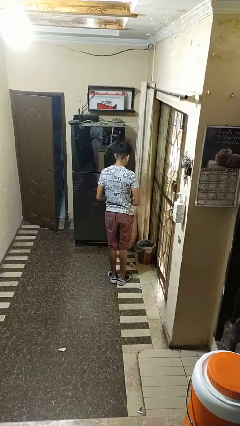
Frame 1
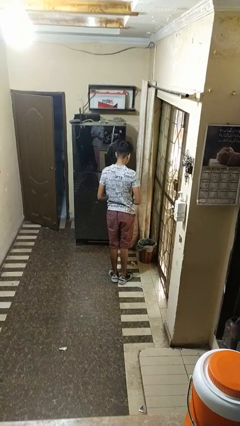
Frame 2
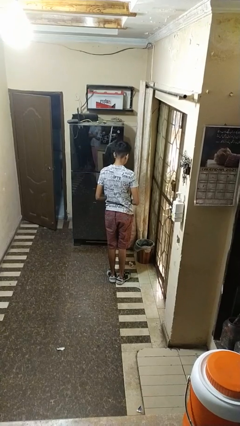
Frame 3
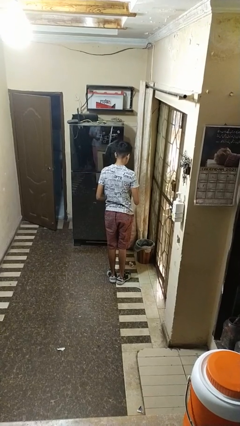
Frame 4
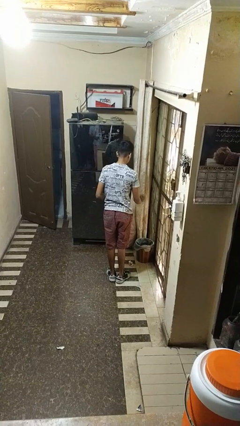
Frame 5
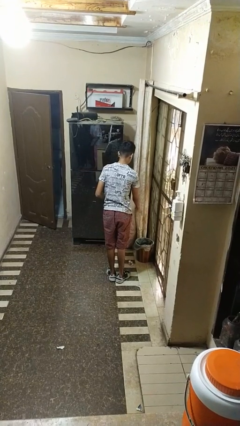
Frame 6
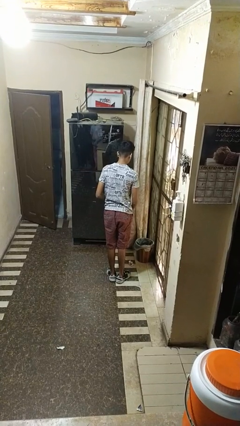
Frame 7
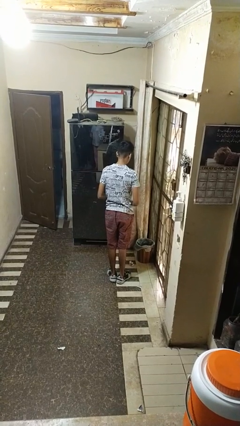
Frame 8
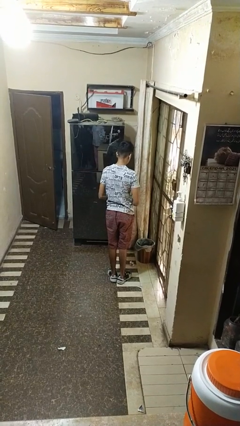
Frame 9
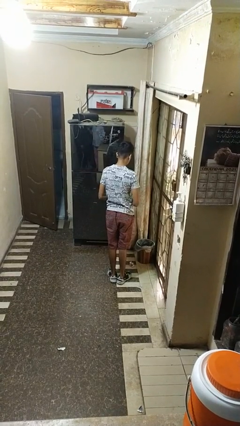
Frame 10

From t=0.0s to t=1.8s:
person discards trash

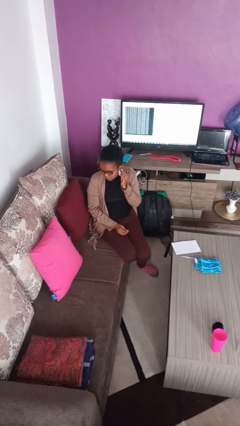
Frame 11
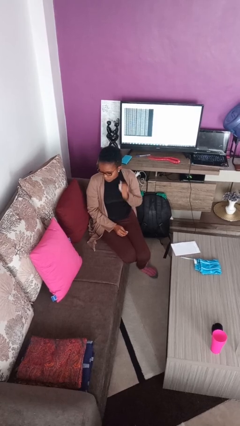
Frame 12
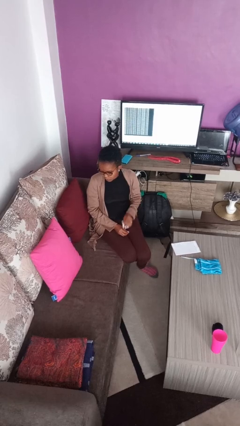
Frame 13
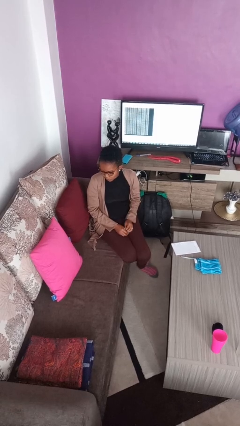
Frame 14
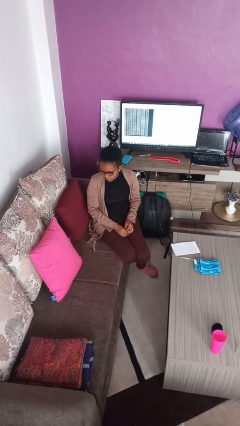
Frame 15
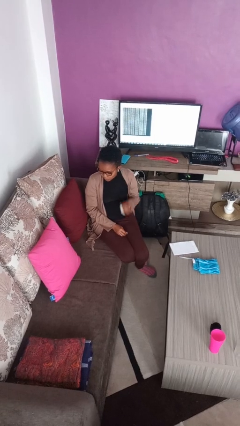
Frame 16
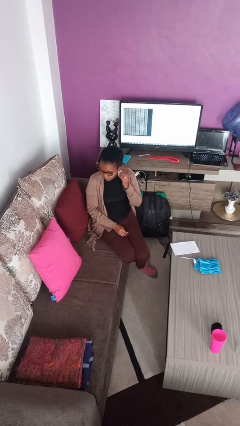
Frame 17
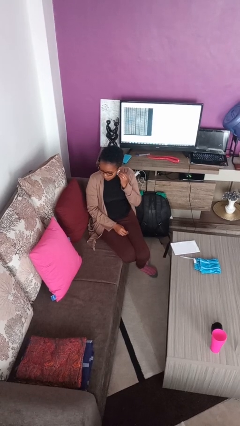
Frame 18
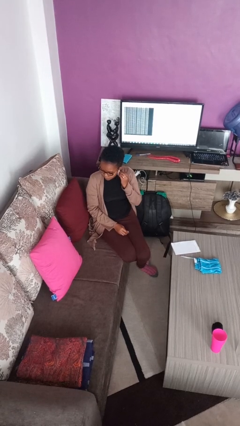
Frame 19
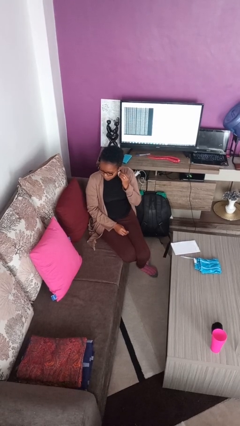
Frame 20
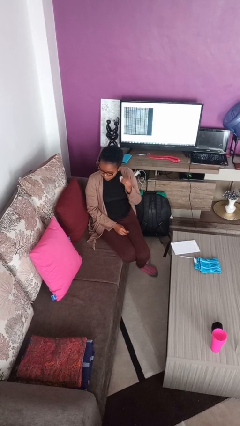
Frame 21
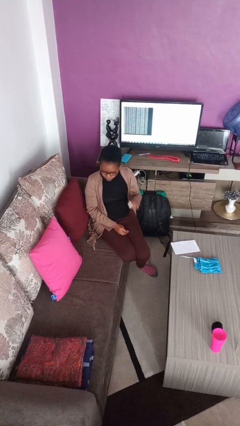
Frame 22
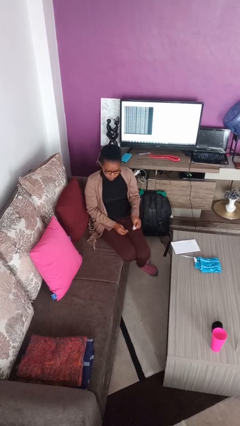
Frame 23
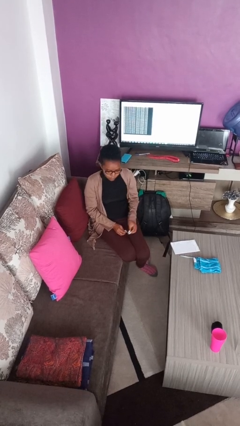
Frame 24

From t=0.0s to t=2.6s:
person takes off earrings

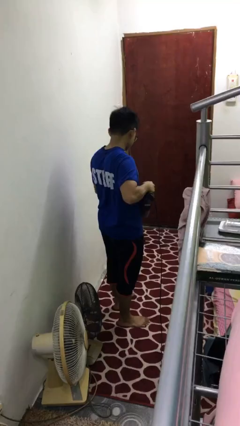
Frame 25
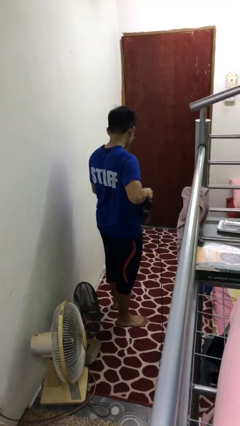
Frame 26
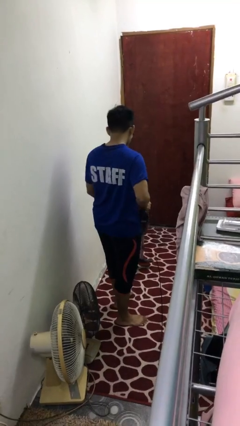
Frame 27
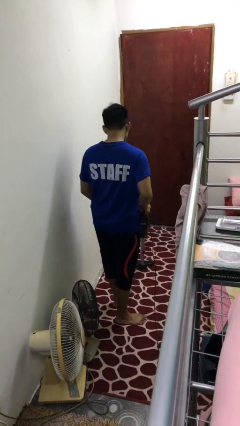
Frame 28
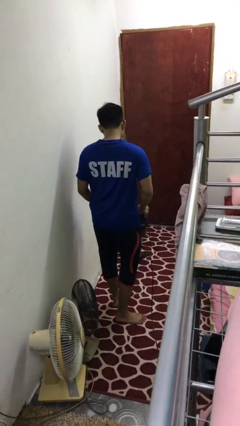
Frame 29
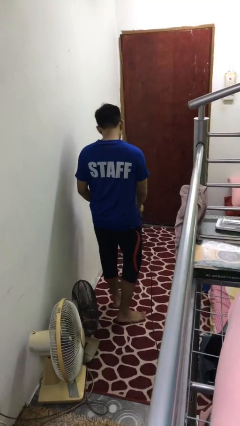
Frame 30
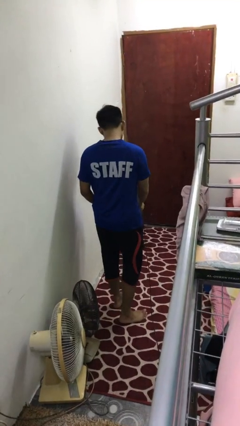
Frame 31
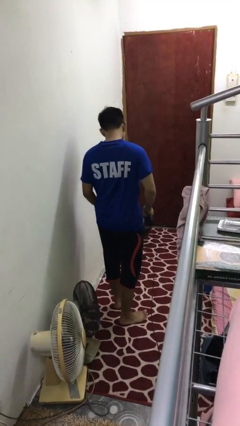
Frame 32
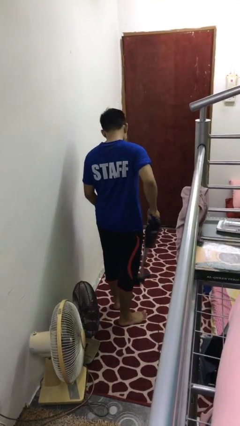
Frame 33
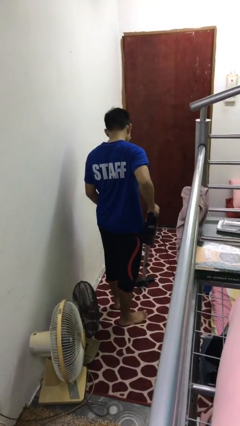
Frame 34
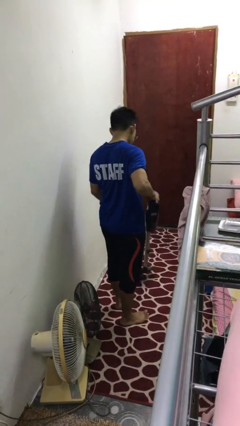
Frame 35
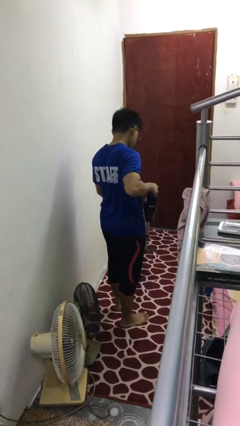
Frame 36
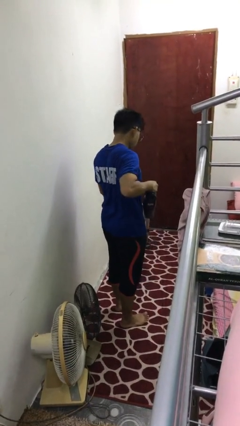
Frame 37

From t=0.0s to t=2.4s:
person vacuums carpet

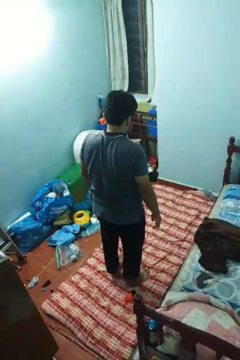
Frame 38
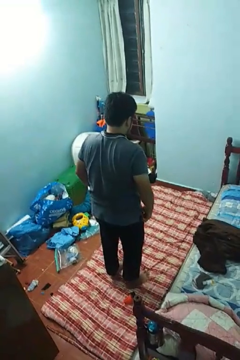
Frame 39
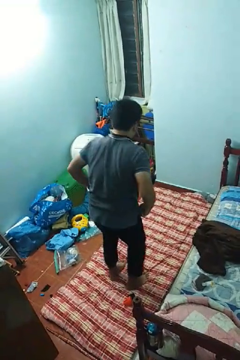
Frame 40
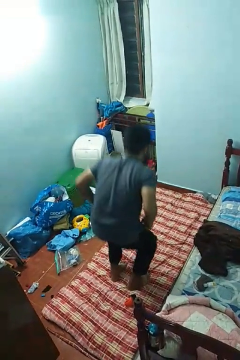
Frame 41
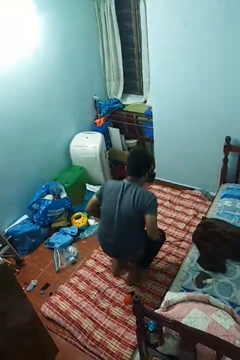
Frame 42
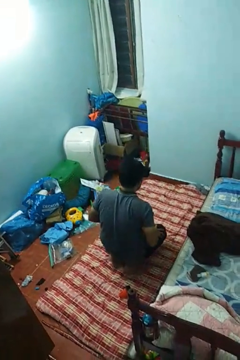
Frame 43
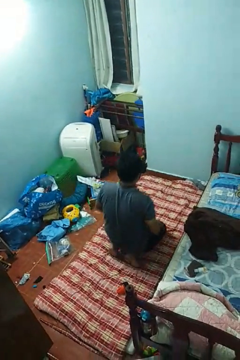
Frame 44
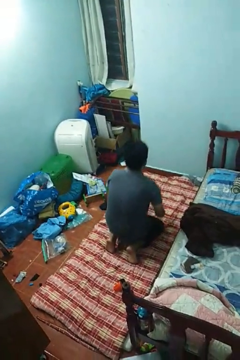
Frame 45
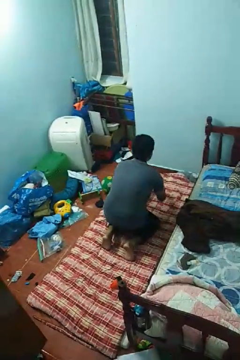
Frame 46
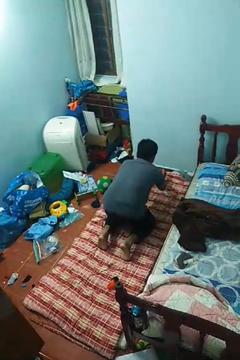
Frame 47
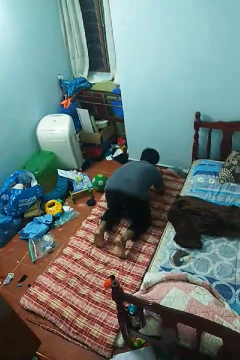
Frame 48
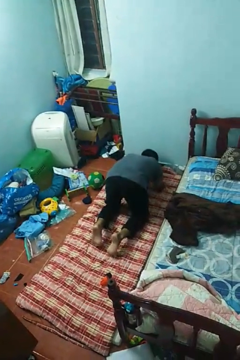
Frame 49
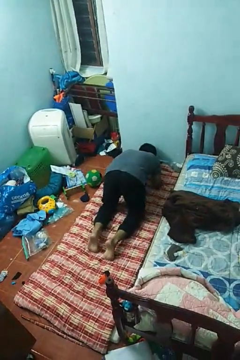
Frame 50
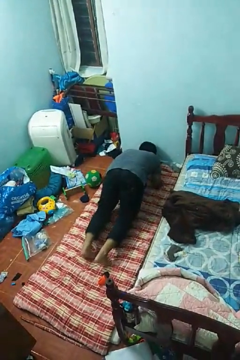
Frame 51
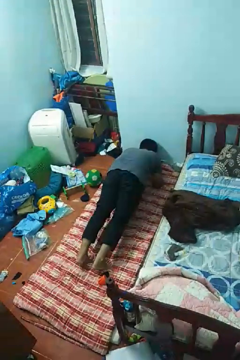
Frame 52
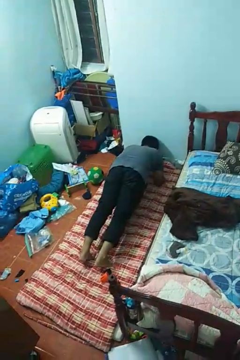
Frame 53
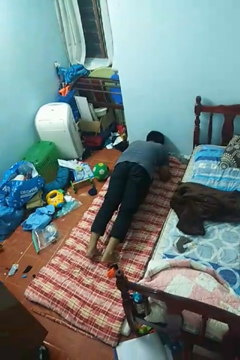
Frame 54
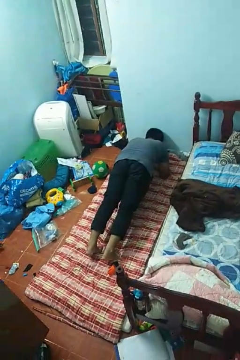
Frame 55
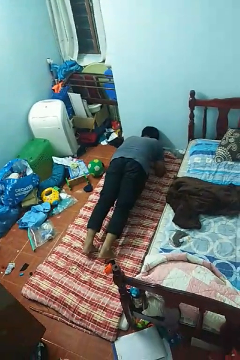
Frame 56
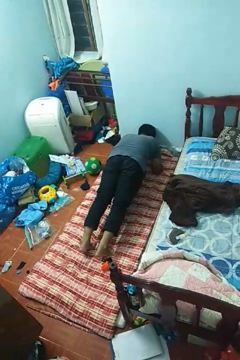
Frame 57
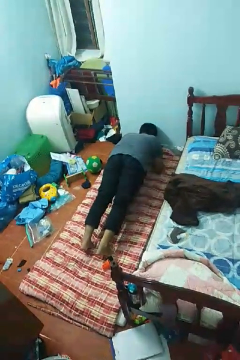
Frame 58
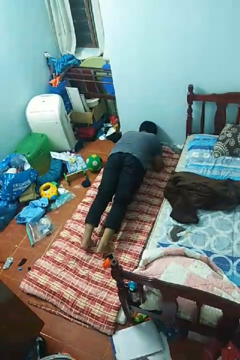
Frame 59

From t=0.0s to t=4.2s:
person exercises with plank

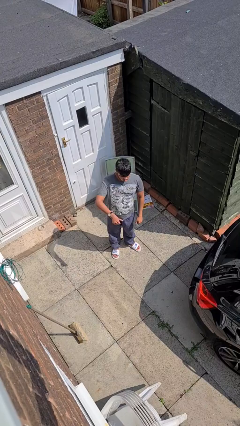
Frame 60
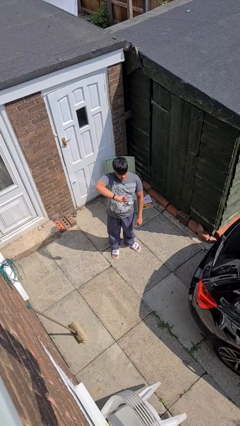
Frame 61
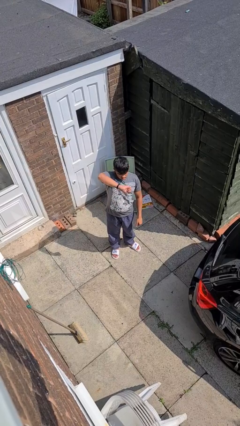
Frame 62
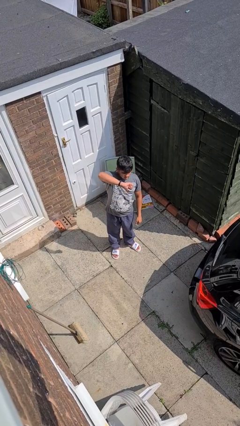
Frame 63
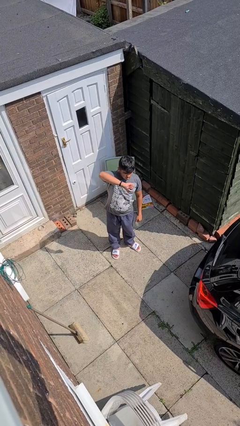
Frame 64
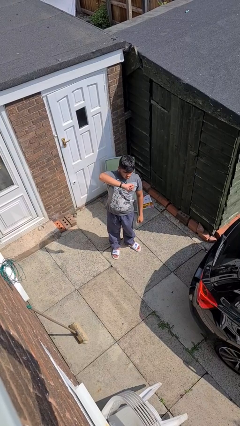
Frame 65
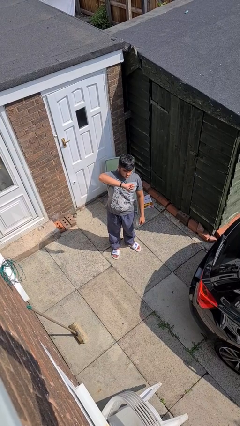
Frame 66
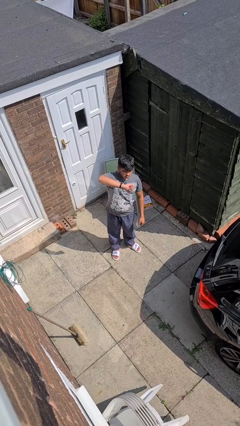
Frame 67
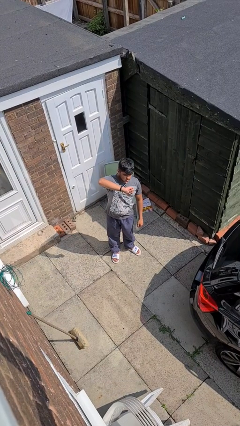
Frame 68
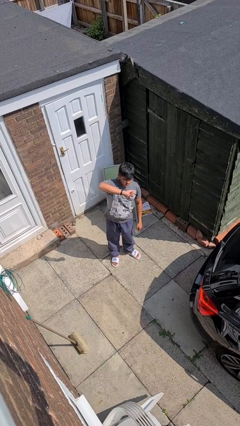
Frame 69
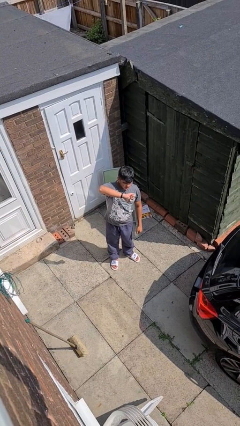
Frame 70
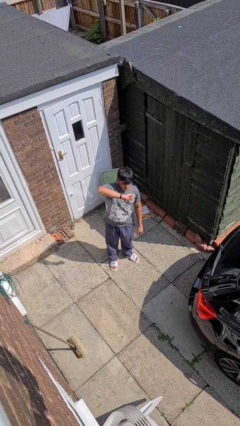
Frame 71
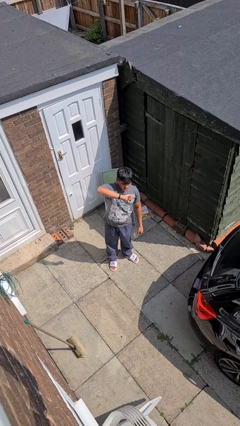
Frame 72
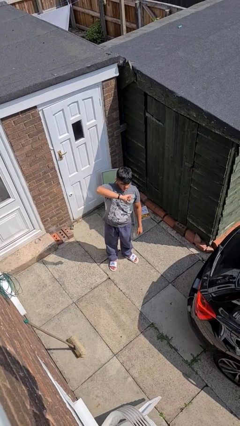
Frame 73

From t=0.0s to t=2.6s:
person gestures thumbs down

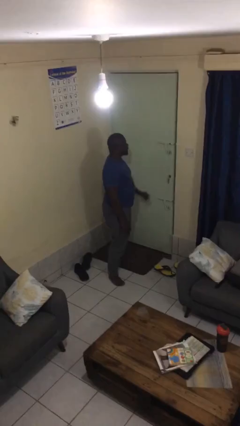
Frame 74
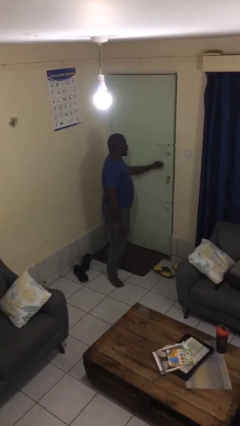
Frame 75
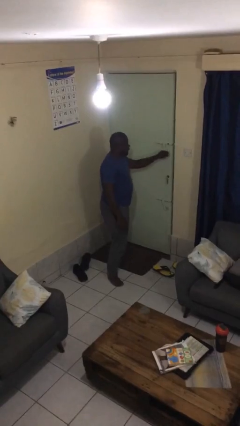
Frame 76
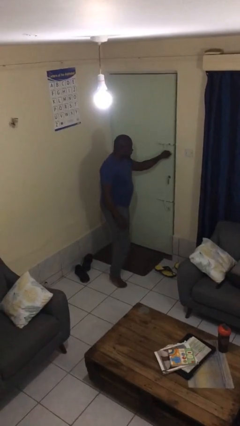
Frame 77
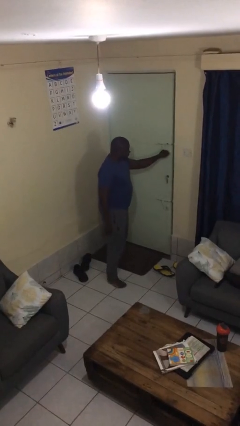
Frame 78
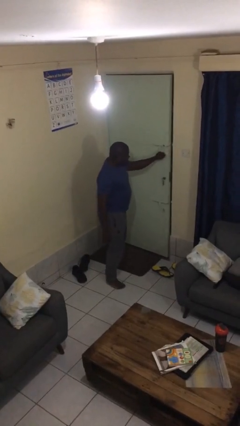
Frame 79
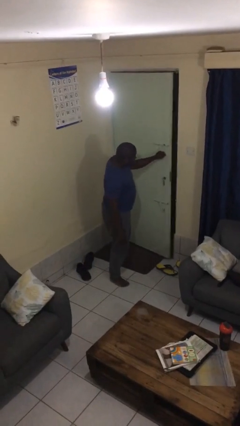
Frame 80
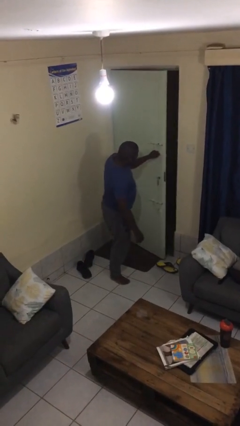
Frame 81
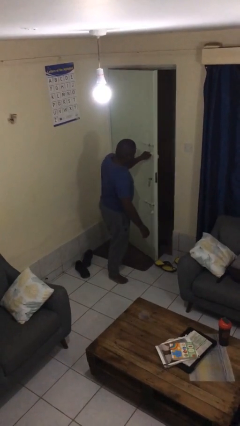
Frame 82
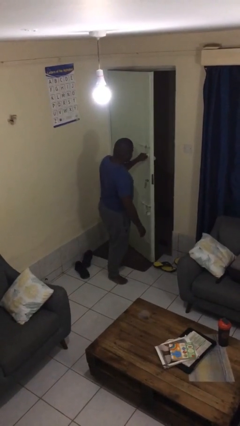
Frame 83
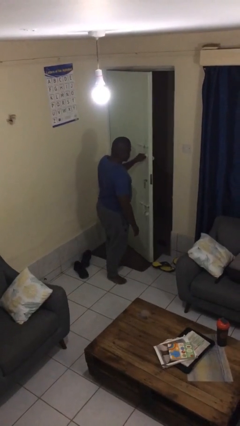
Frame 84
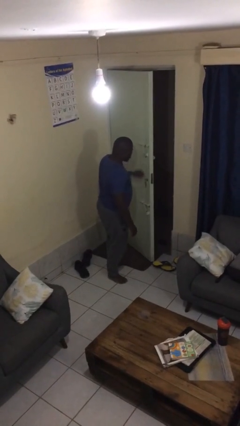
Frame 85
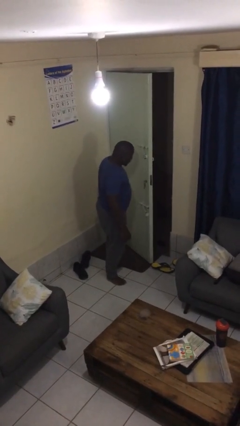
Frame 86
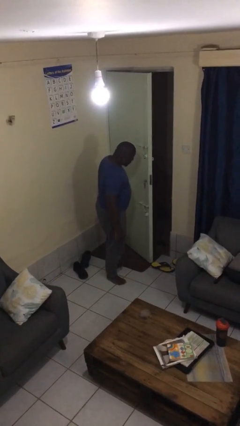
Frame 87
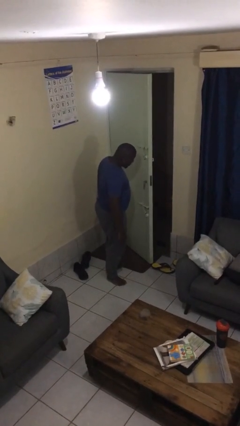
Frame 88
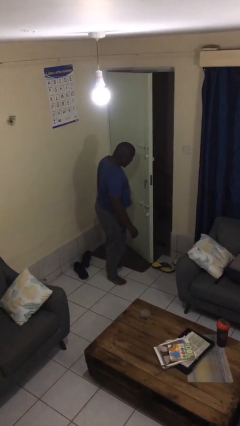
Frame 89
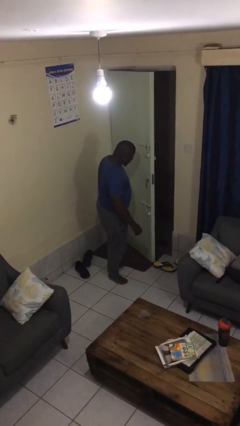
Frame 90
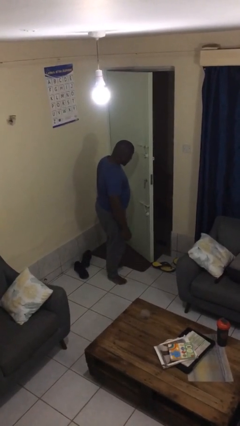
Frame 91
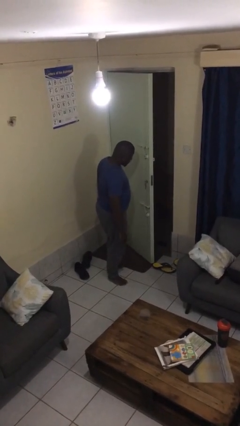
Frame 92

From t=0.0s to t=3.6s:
person opens facility door

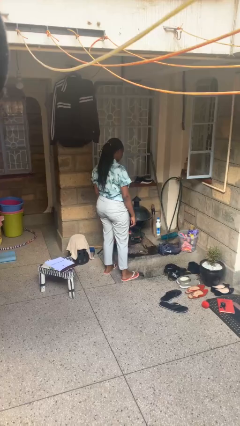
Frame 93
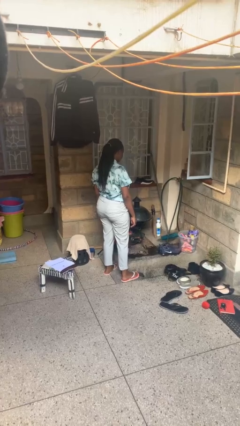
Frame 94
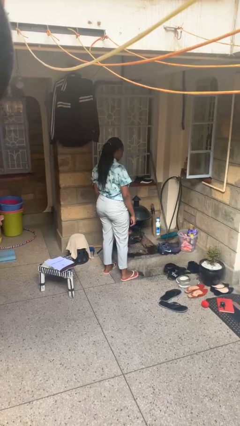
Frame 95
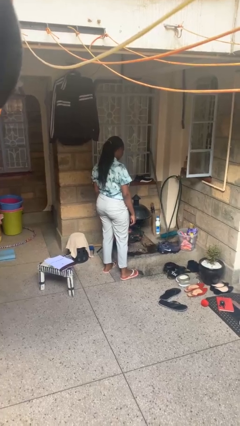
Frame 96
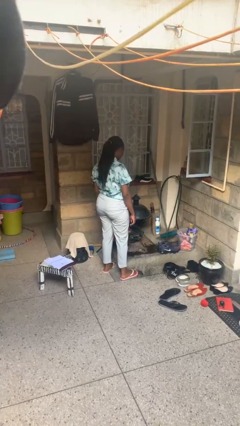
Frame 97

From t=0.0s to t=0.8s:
person taps object with finger
